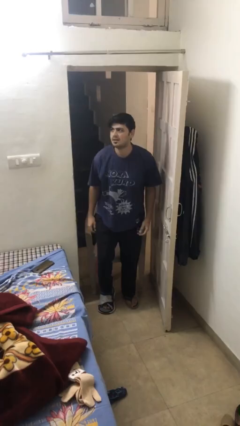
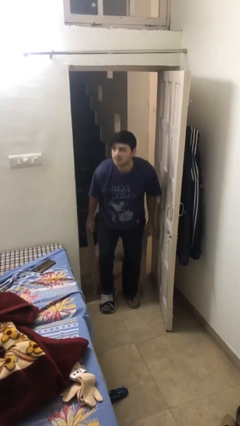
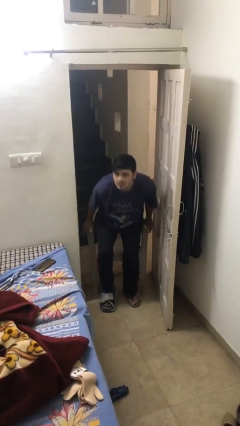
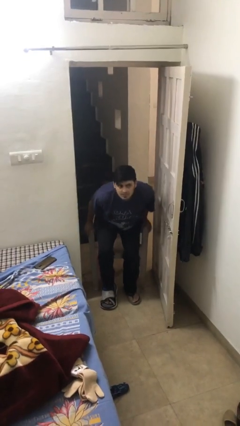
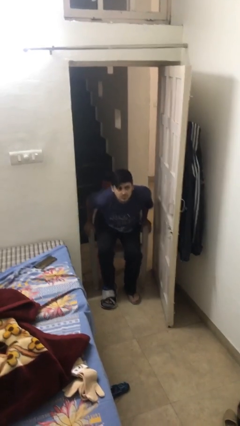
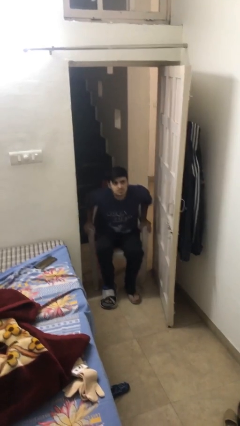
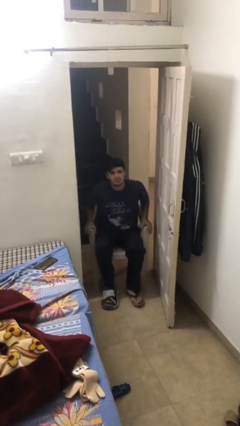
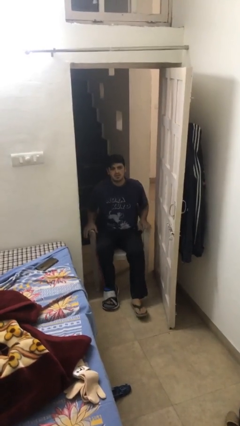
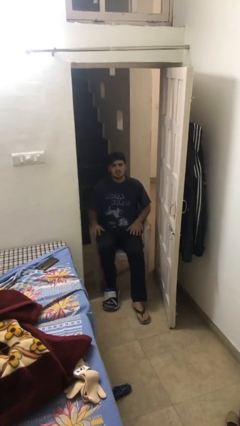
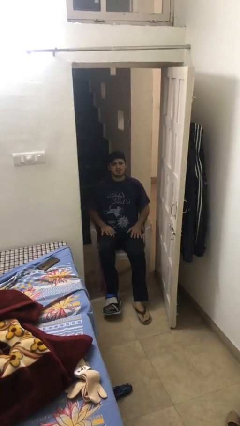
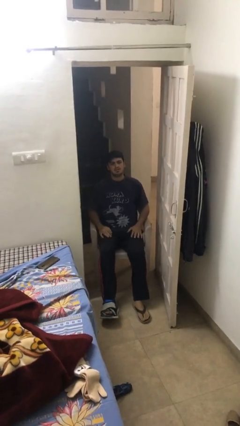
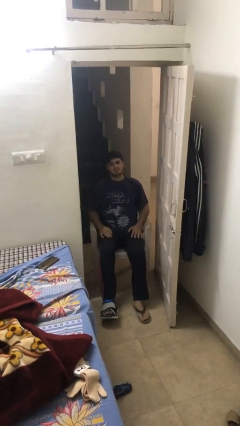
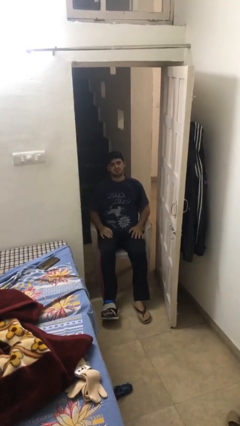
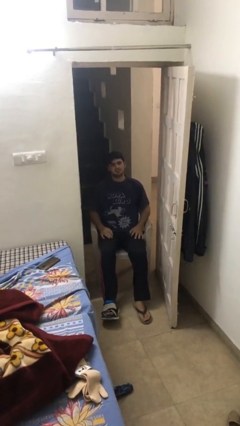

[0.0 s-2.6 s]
person sits down

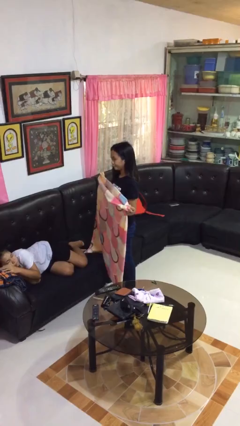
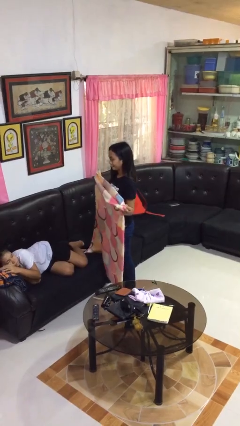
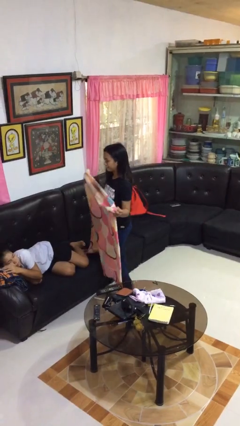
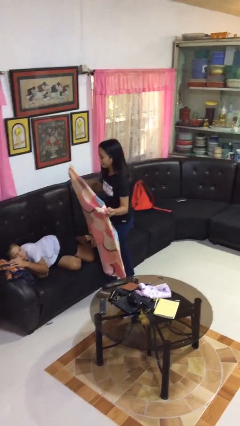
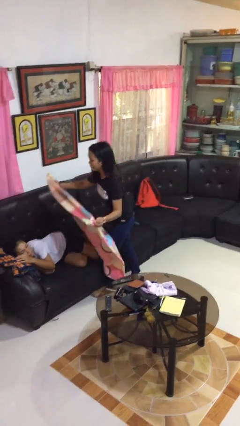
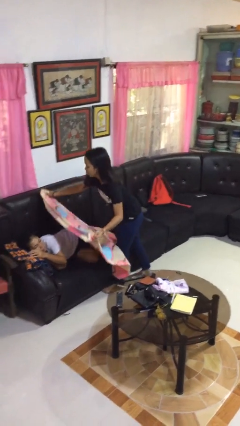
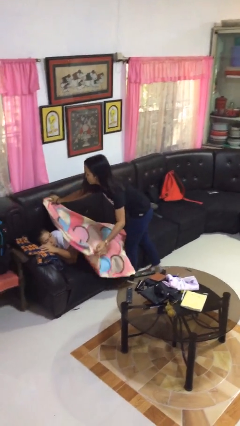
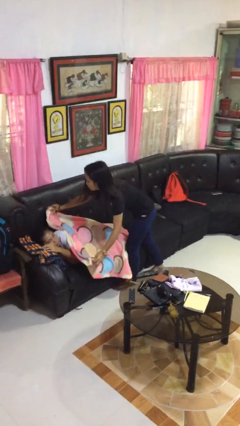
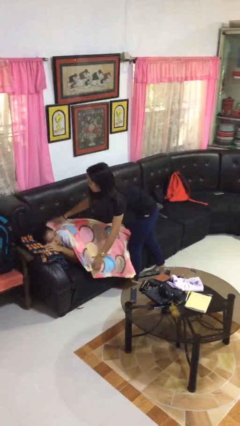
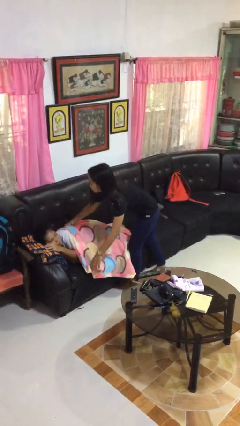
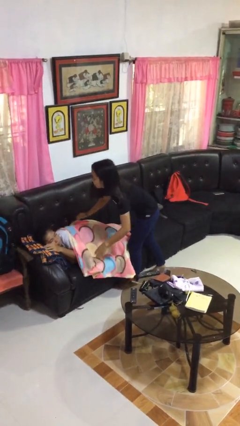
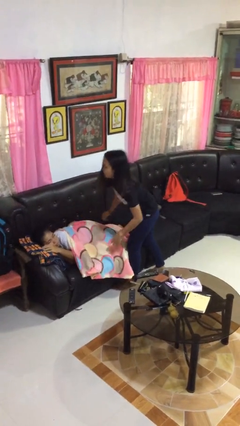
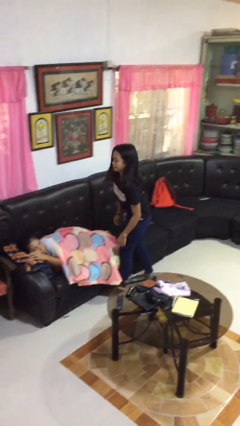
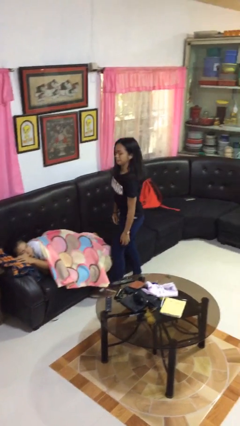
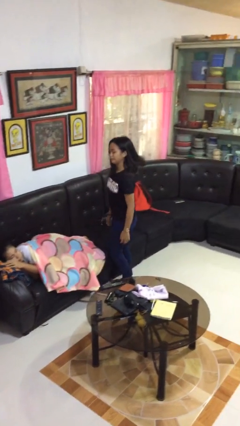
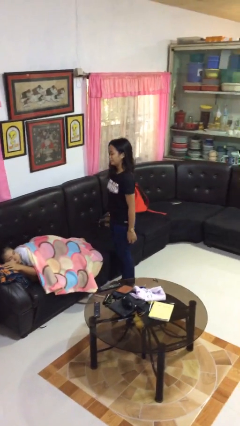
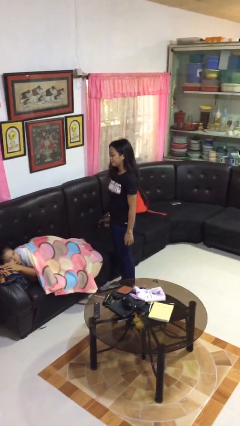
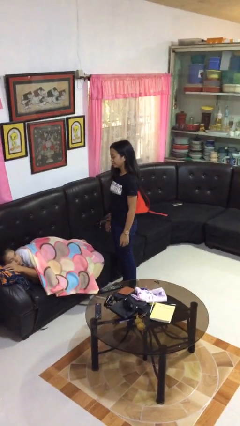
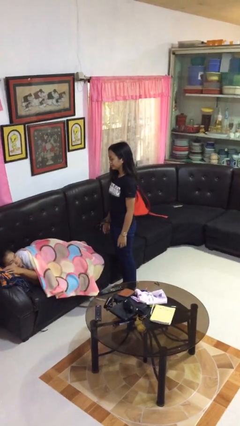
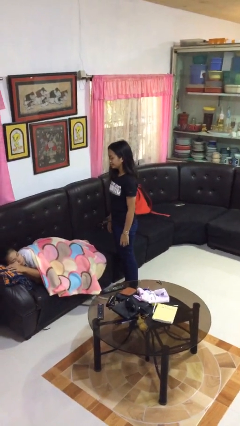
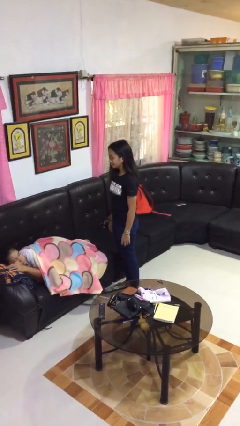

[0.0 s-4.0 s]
person covers friend with blanket

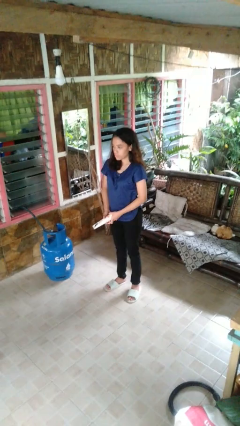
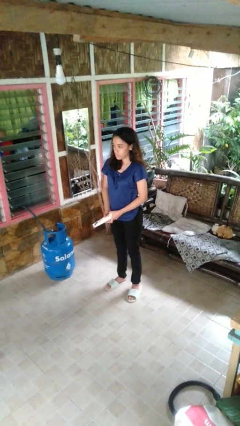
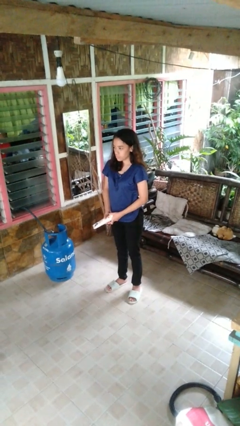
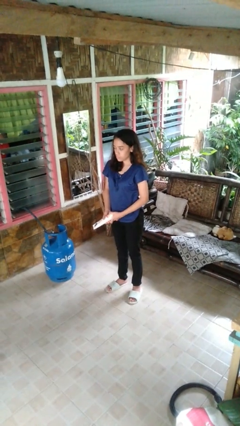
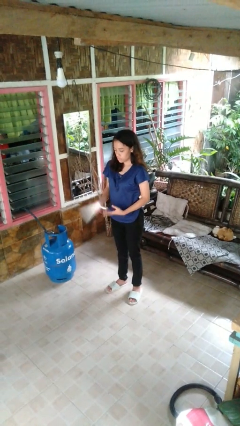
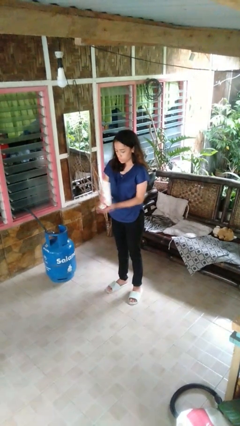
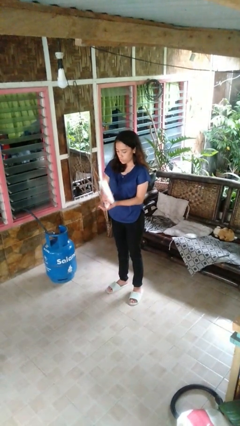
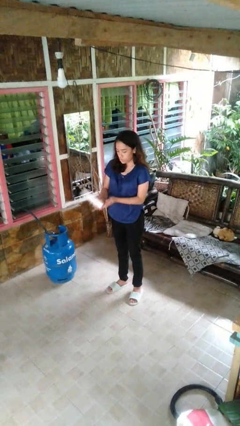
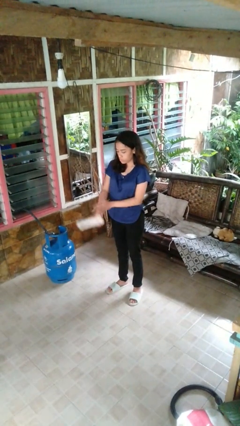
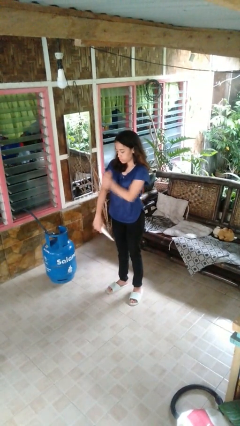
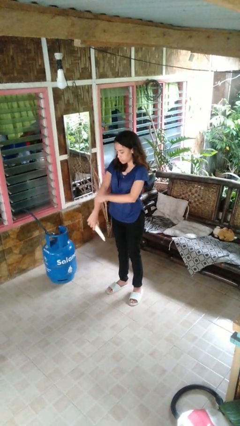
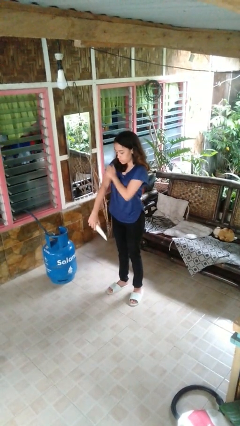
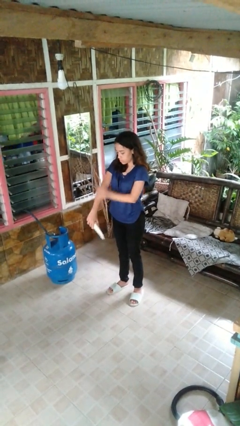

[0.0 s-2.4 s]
person applies sunscreen

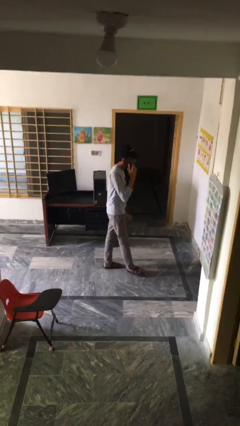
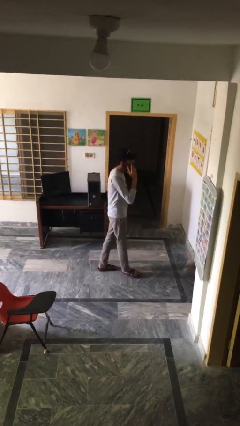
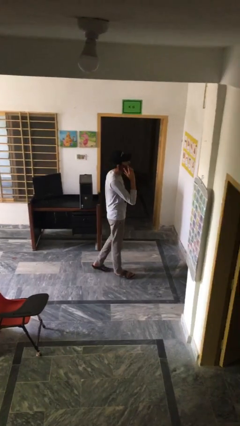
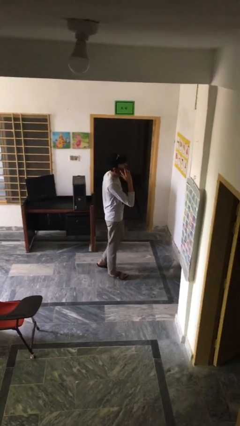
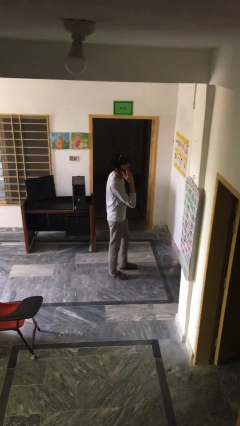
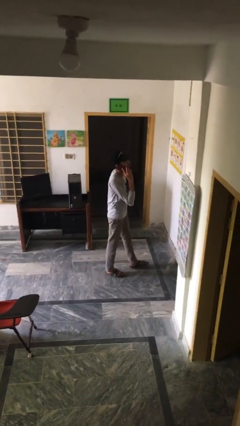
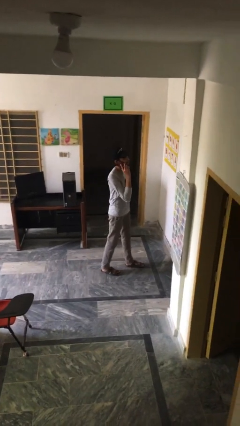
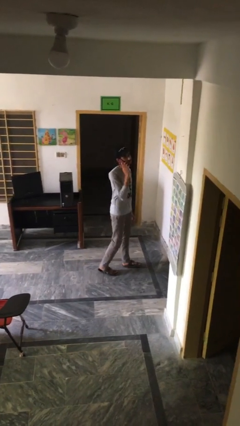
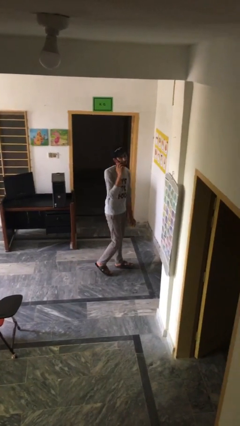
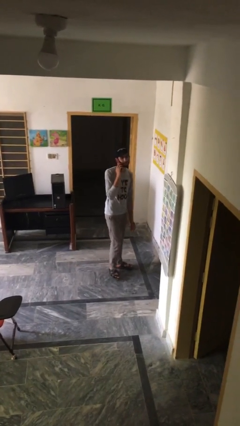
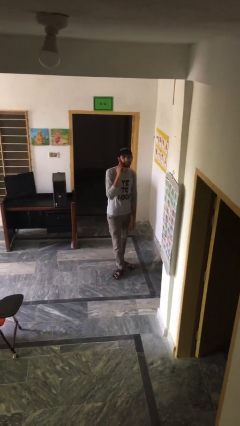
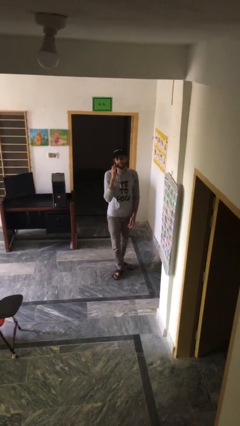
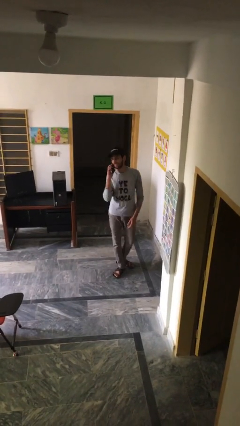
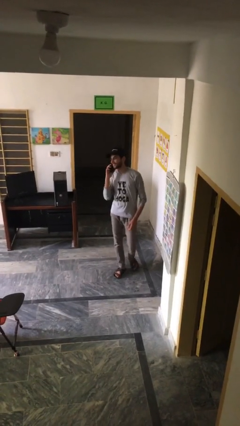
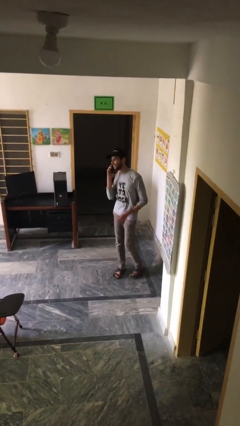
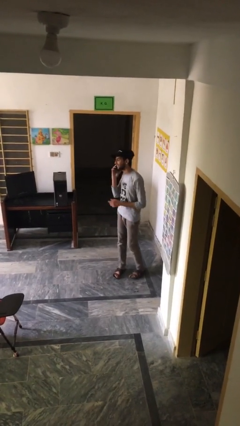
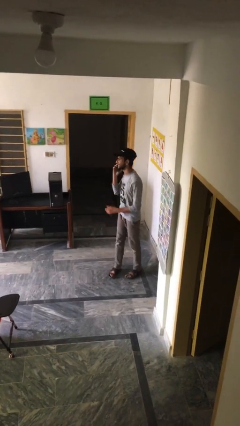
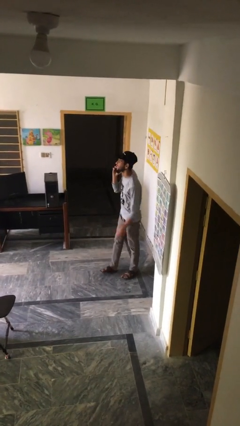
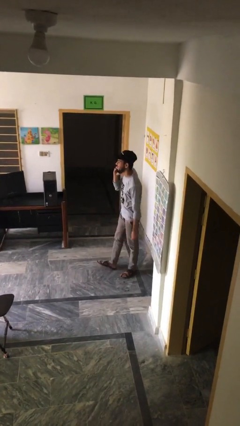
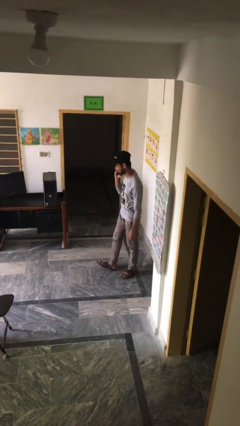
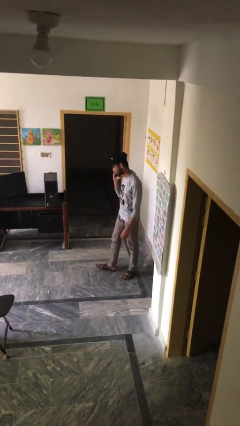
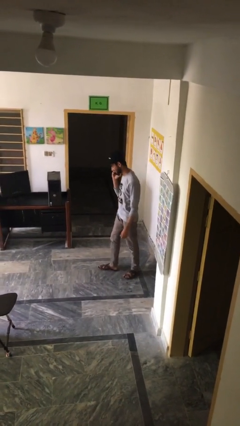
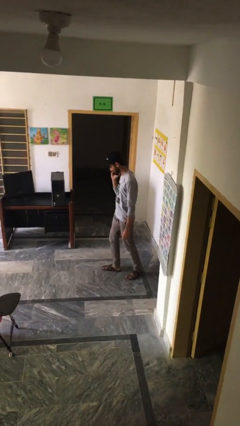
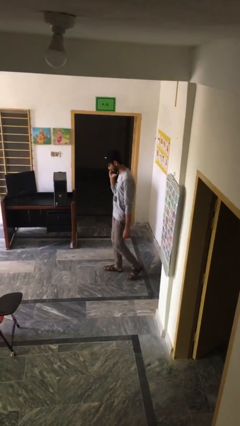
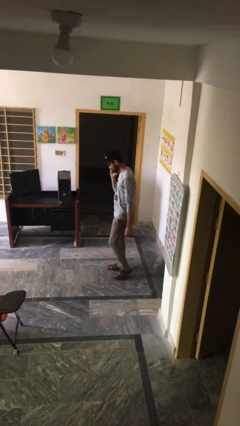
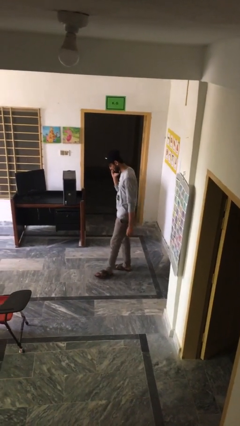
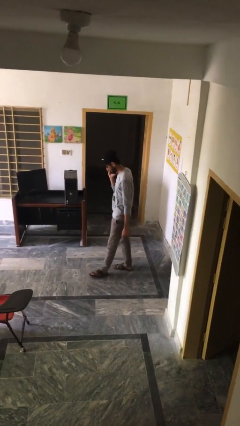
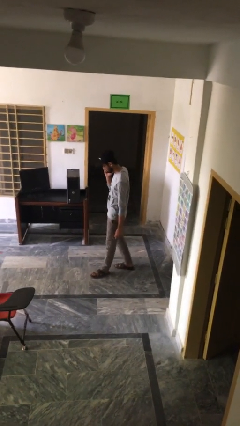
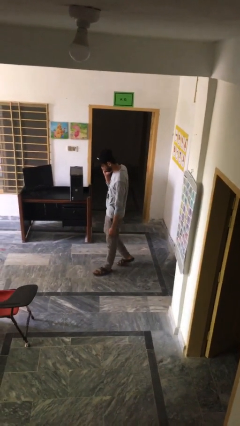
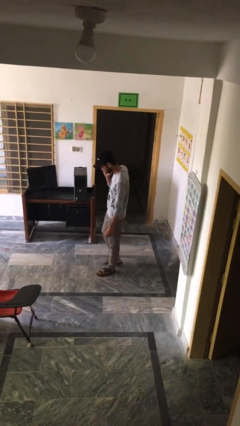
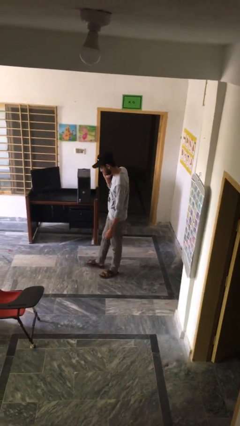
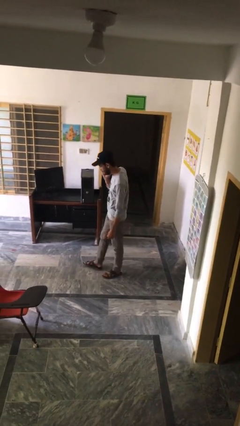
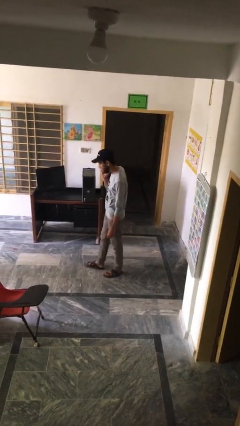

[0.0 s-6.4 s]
person talks on phone

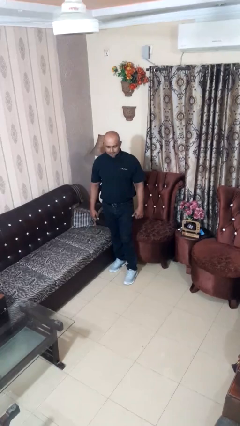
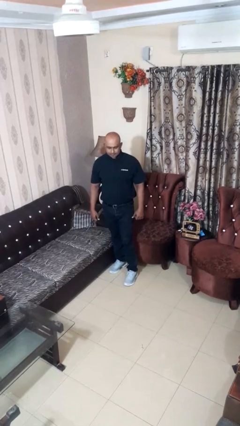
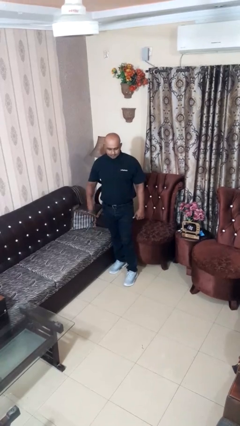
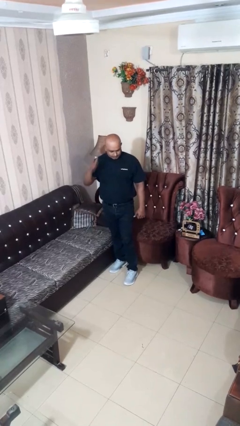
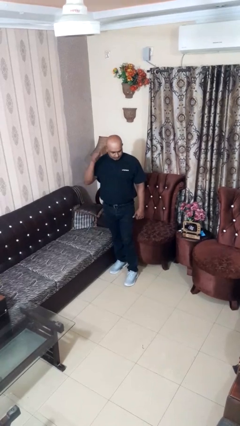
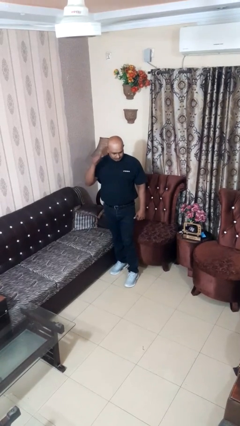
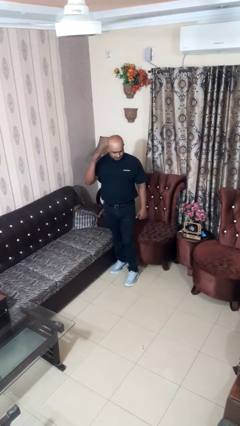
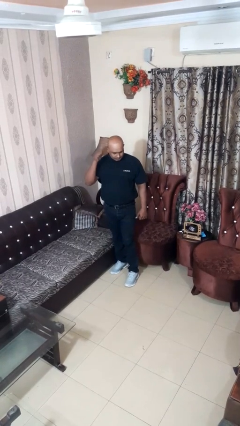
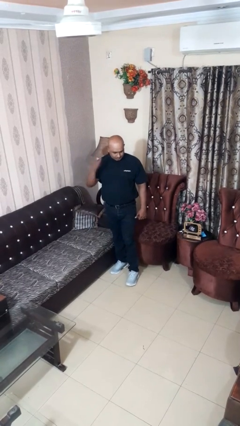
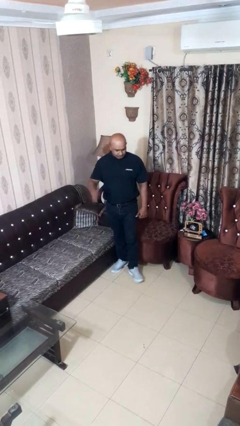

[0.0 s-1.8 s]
person gestures behind me
